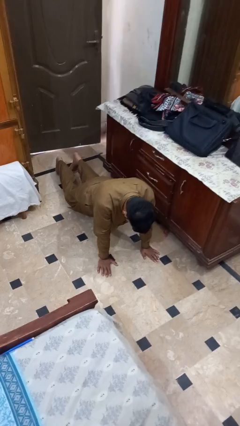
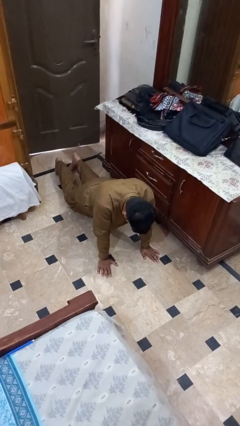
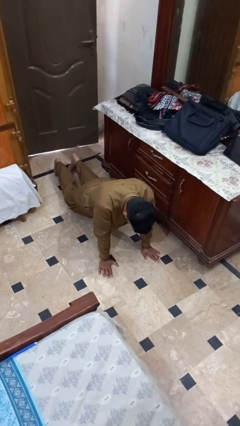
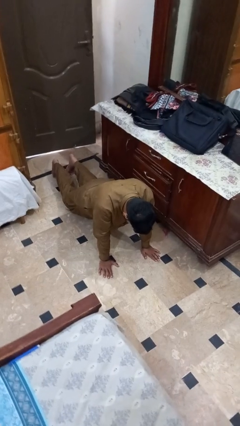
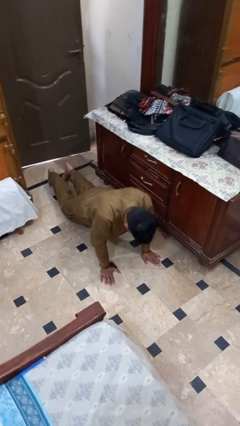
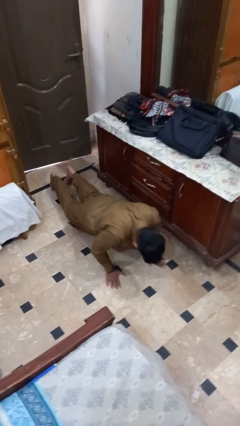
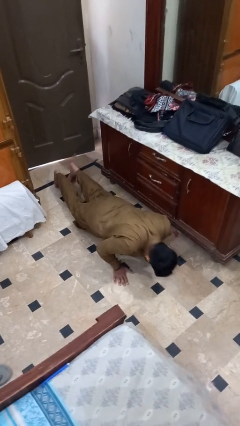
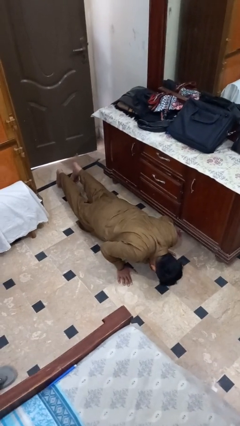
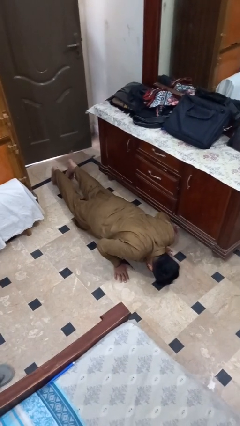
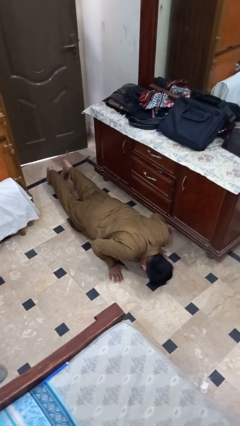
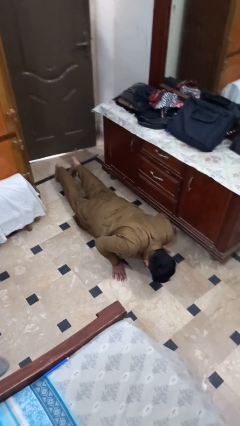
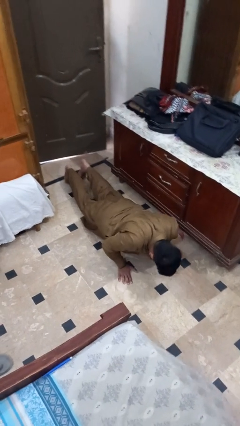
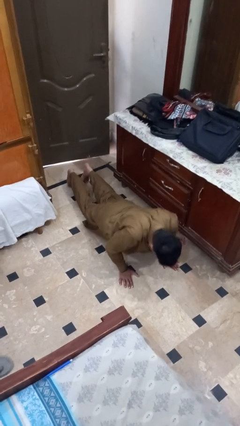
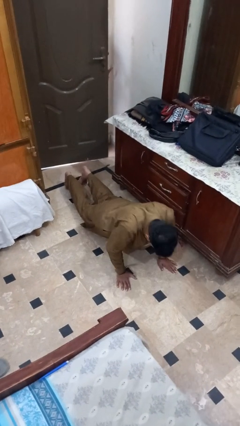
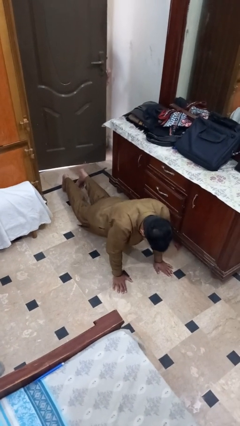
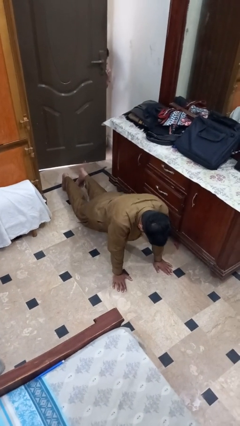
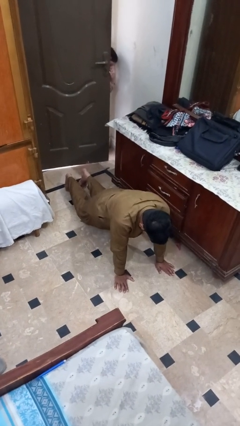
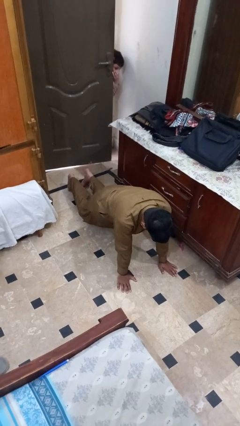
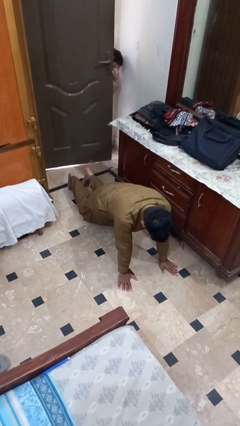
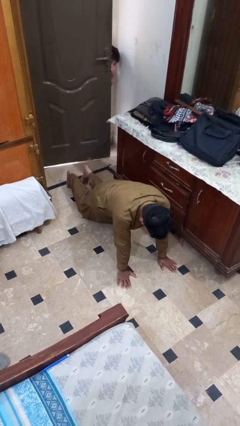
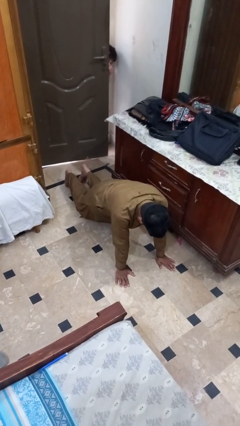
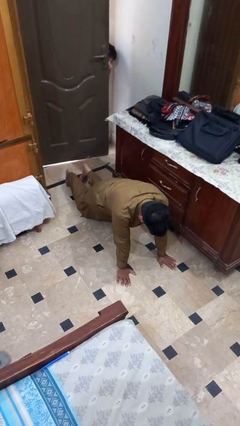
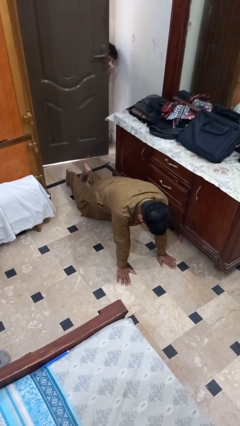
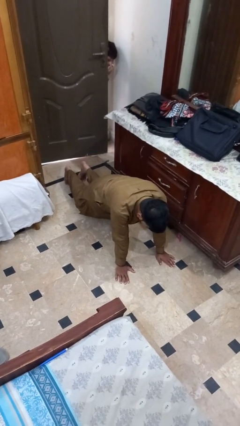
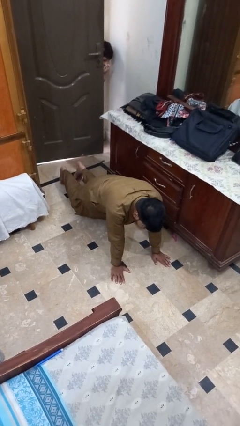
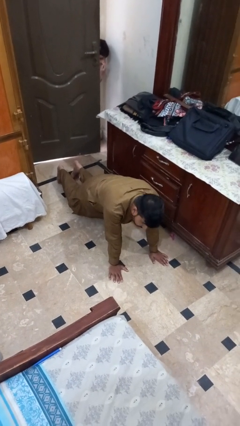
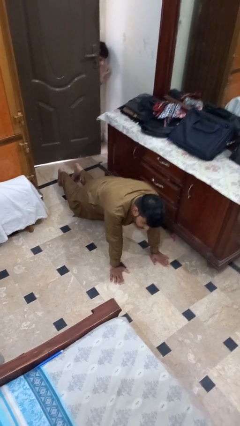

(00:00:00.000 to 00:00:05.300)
person exercises with pushup

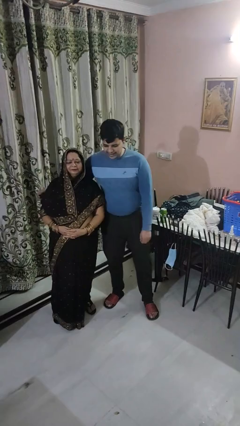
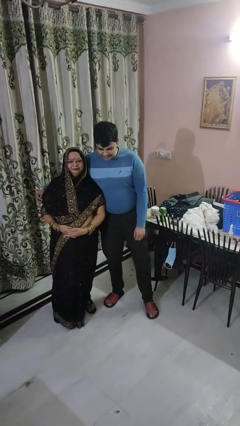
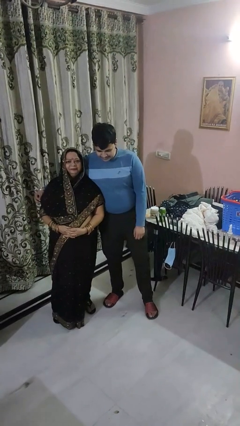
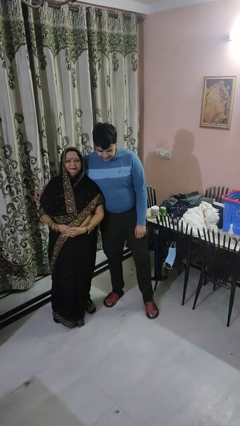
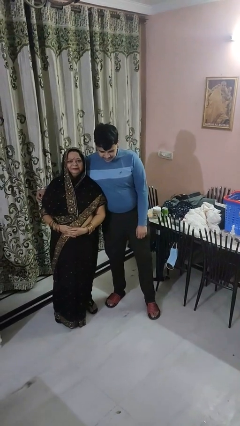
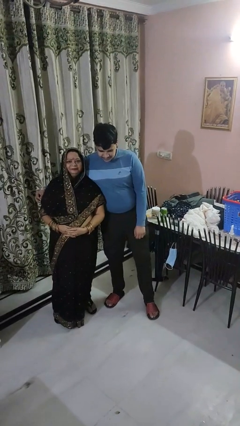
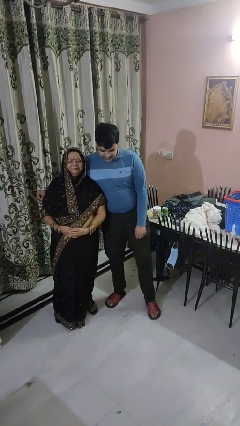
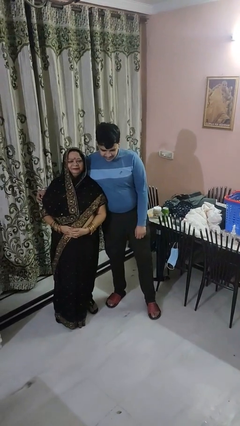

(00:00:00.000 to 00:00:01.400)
person hugs person from side

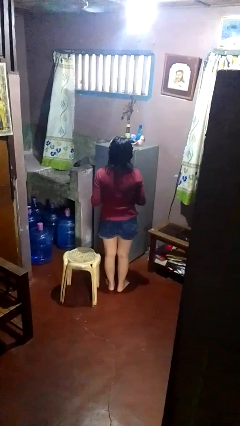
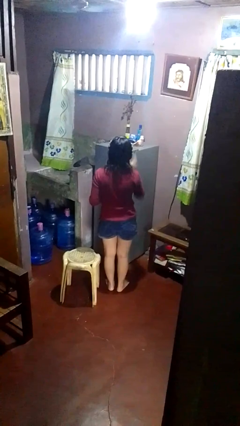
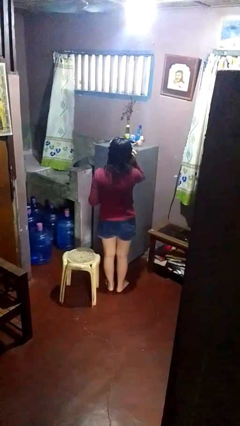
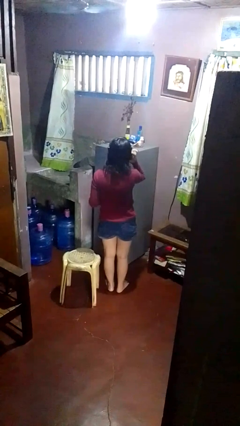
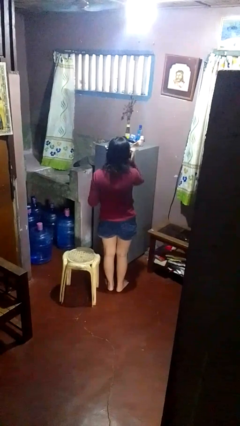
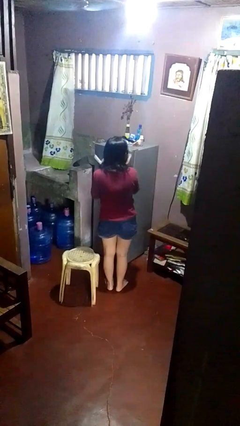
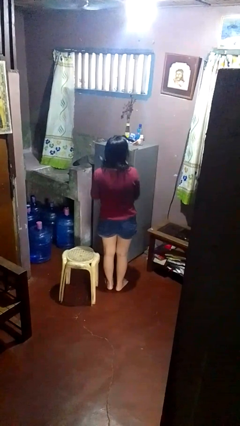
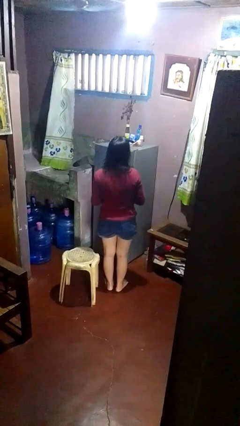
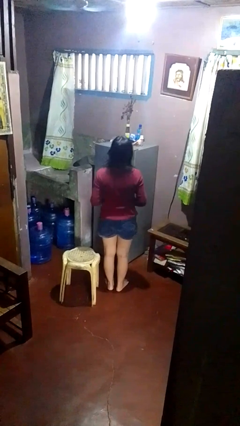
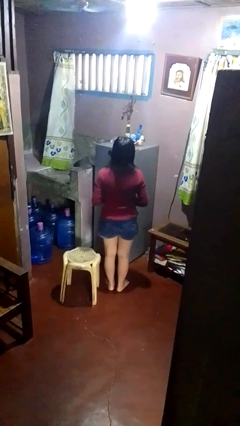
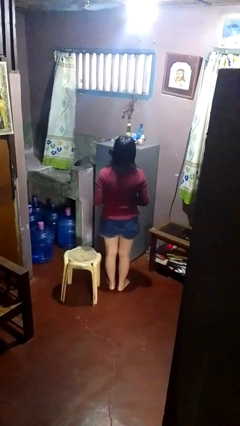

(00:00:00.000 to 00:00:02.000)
person takes off headphones

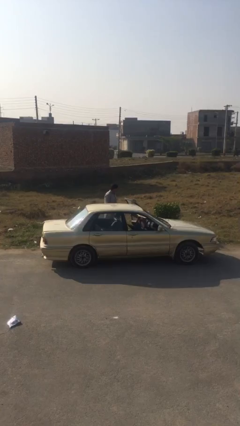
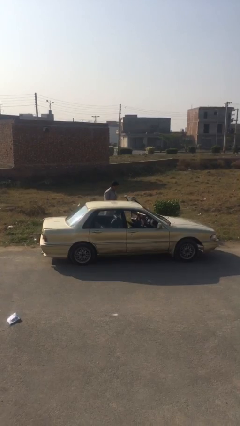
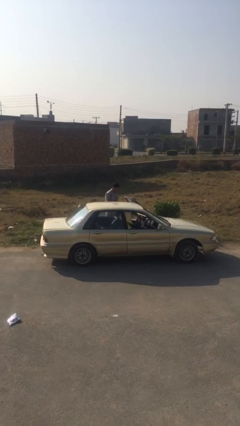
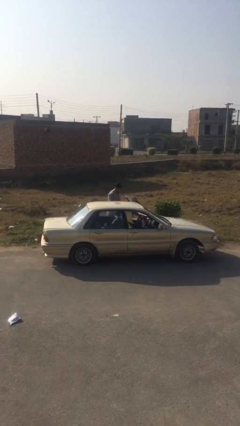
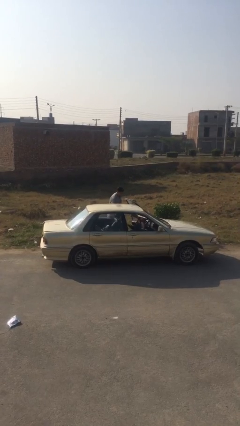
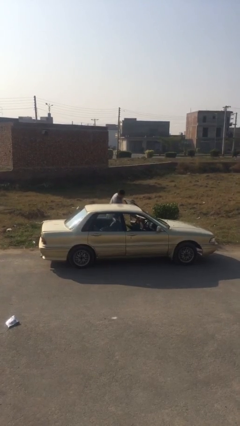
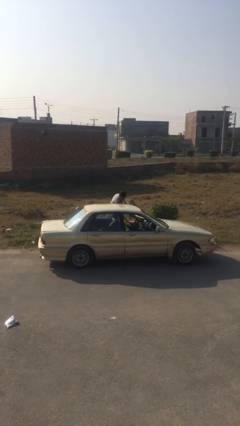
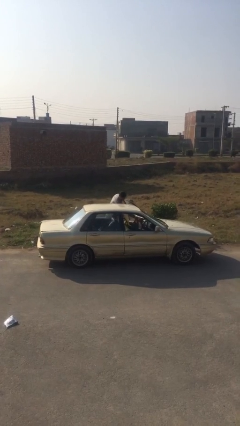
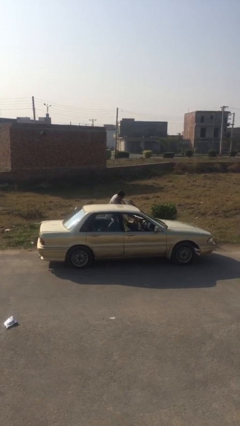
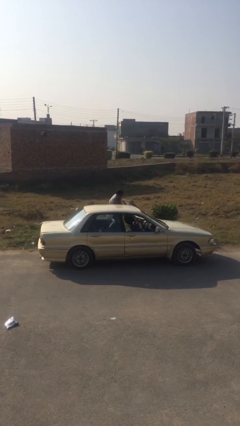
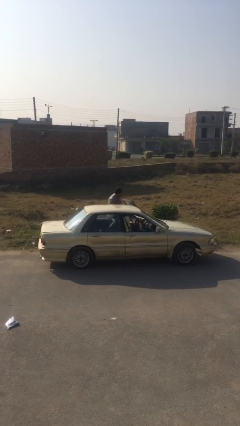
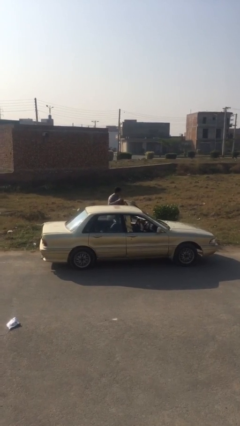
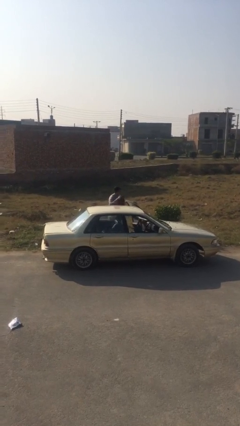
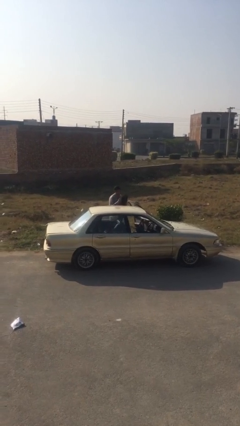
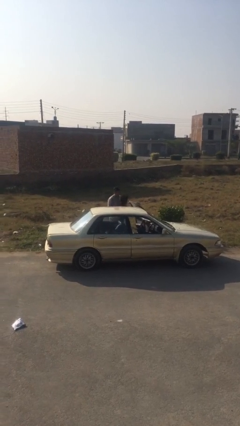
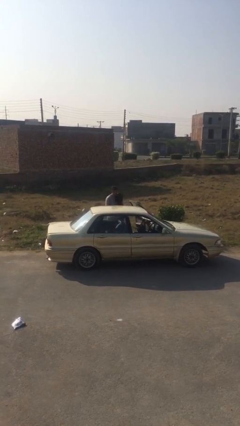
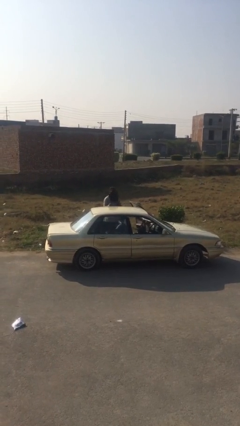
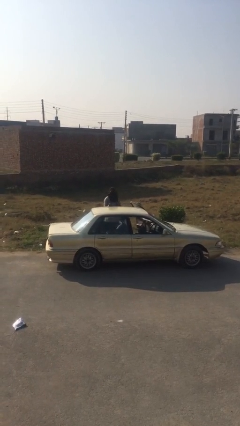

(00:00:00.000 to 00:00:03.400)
person unloads car

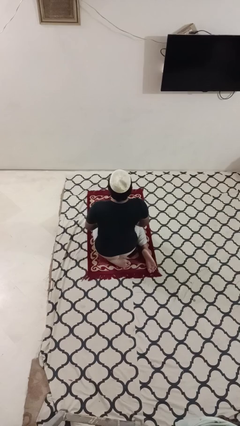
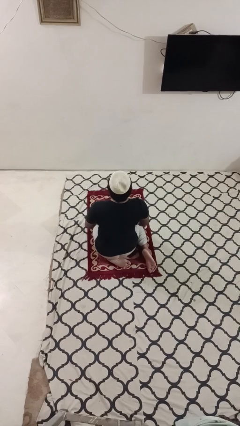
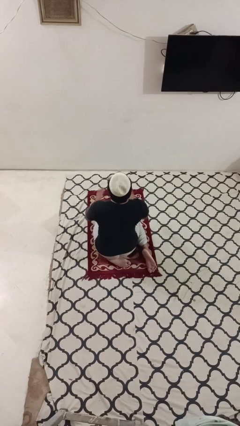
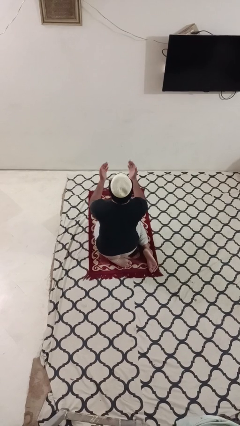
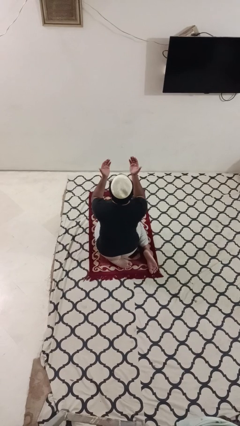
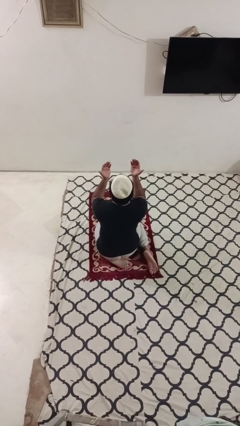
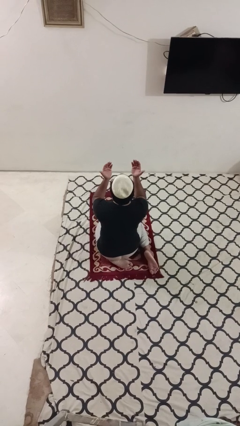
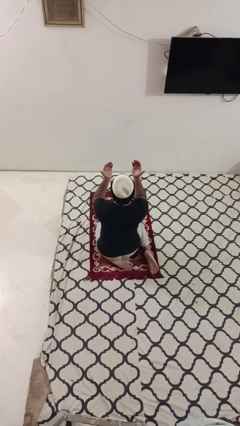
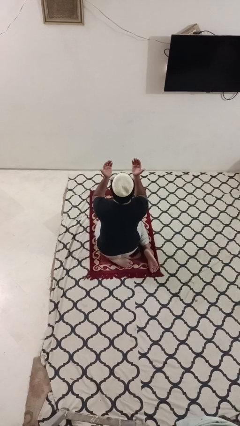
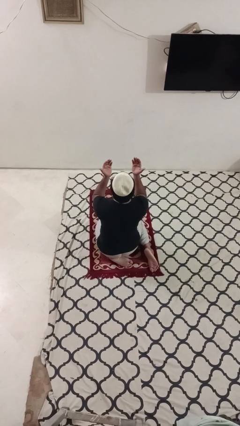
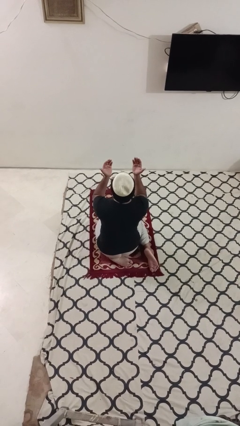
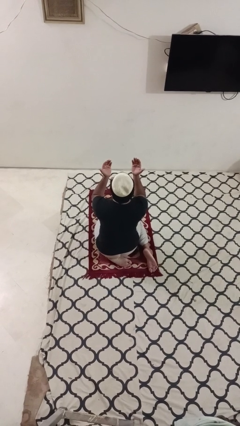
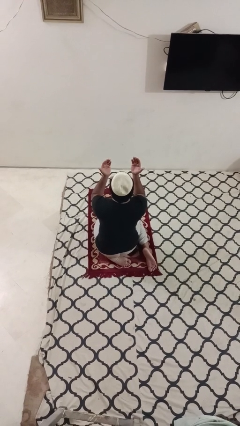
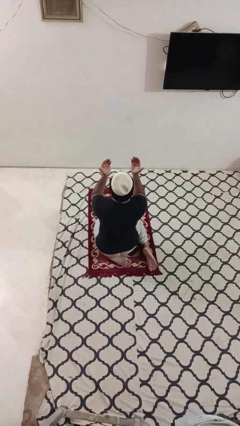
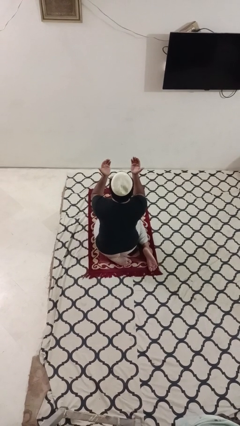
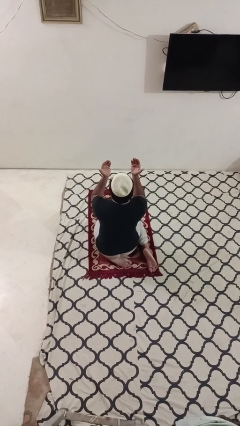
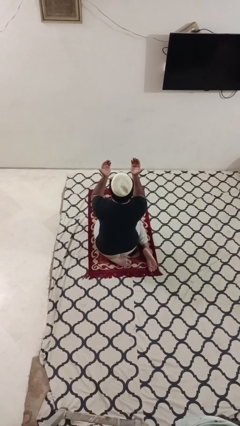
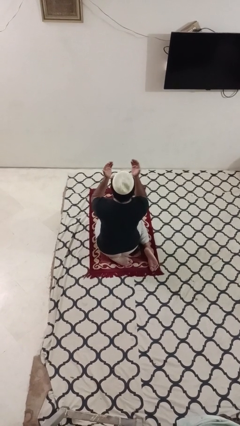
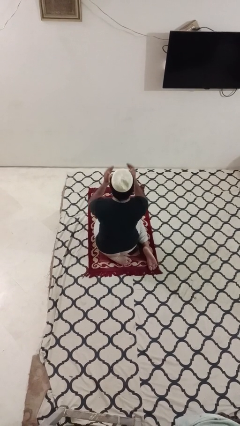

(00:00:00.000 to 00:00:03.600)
person prays

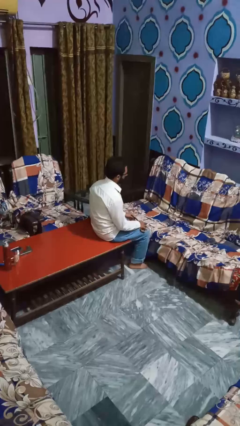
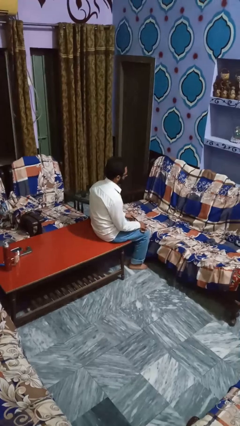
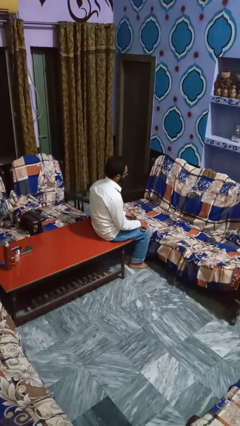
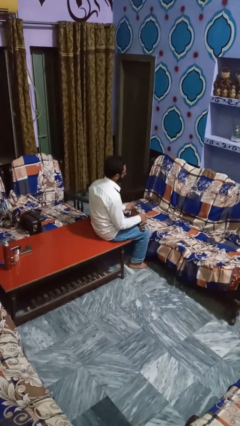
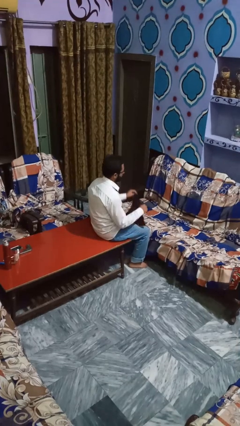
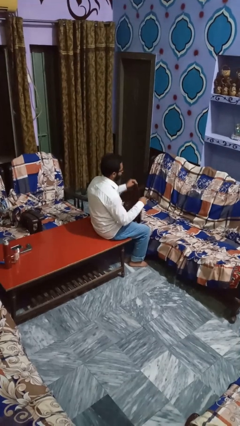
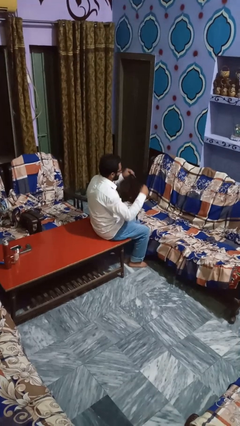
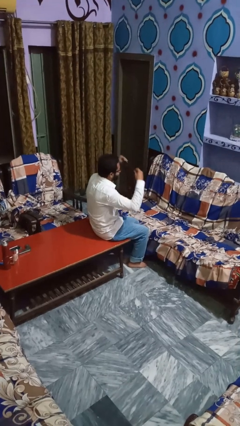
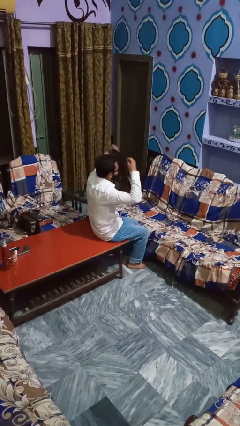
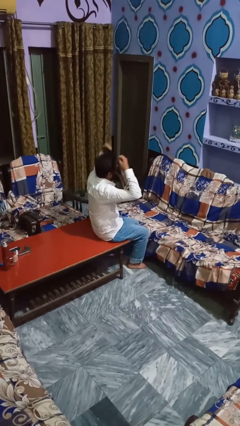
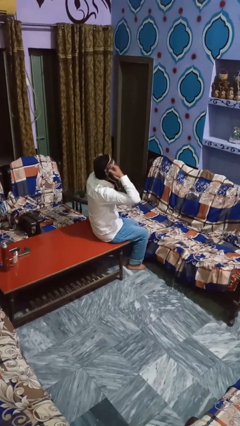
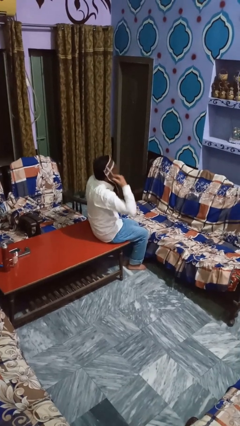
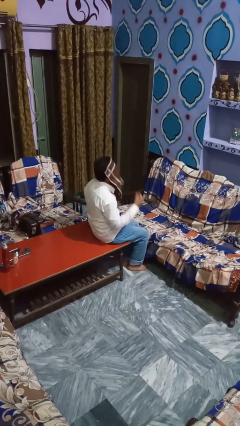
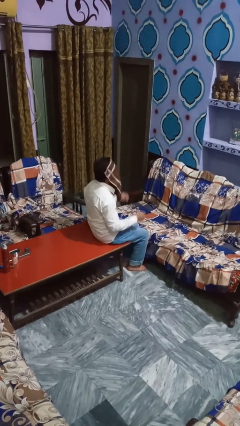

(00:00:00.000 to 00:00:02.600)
person yawns
